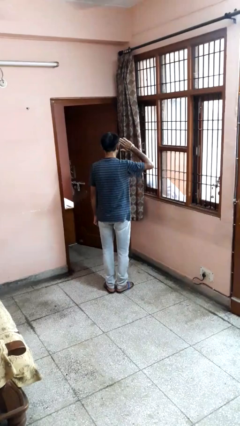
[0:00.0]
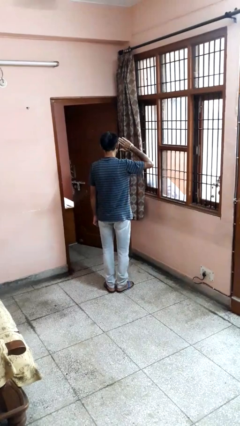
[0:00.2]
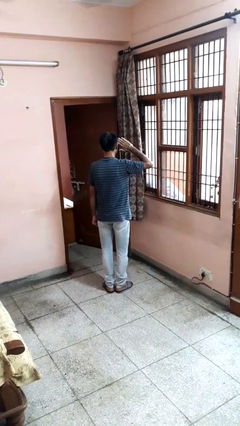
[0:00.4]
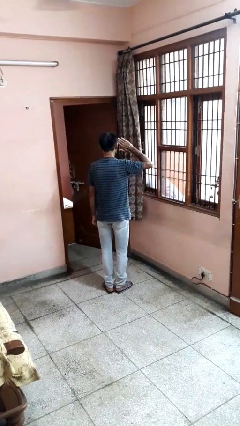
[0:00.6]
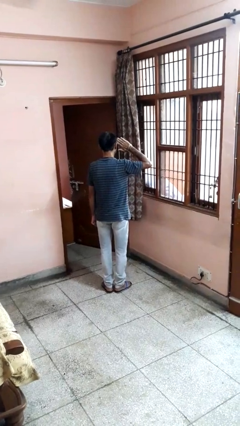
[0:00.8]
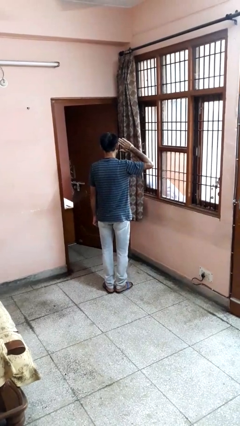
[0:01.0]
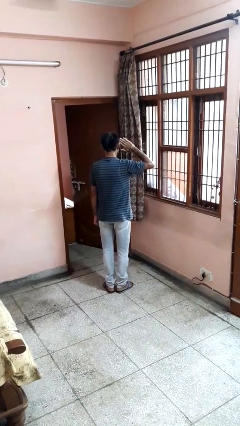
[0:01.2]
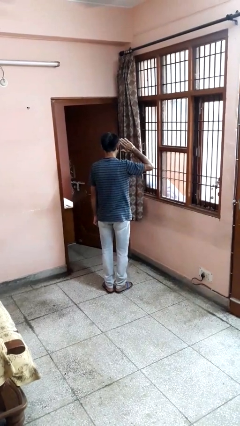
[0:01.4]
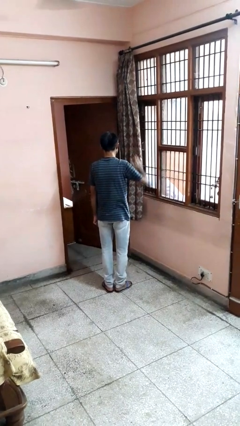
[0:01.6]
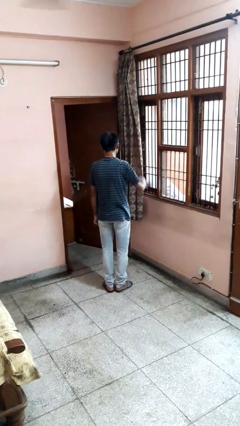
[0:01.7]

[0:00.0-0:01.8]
person salutes

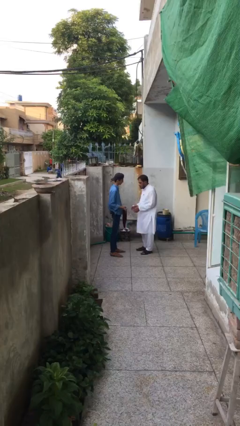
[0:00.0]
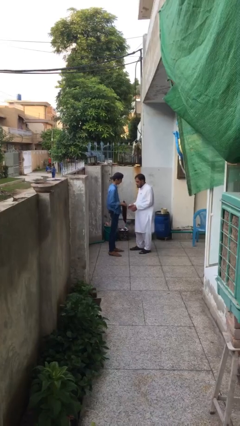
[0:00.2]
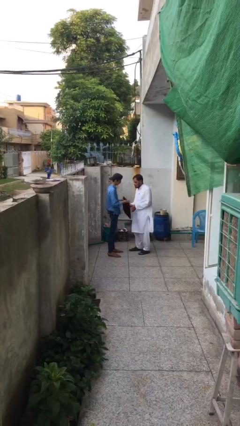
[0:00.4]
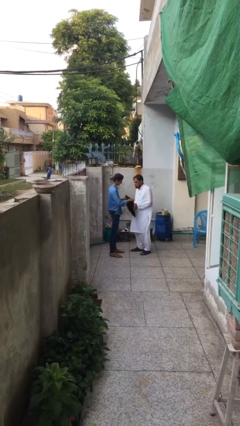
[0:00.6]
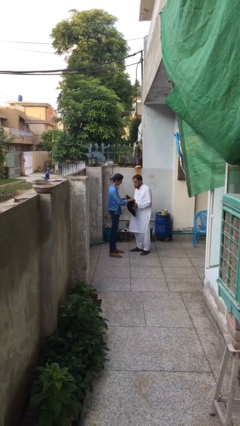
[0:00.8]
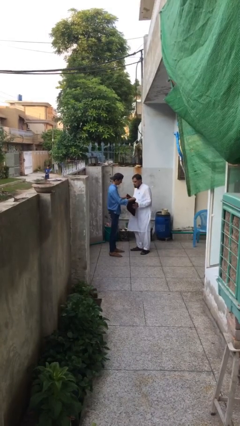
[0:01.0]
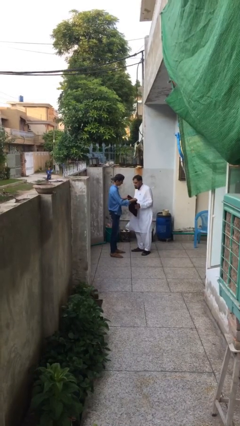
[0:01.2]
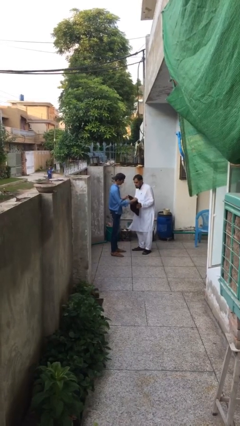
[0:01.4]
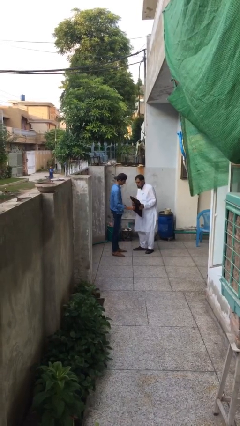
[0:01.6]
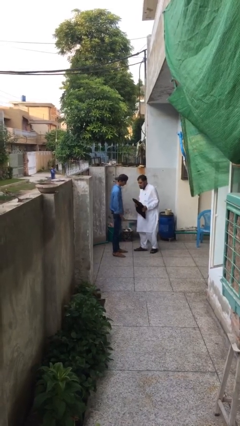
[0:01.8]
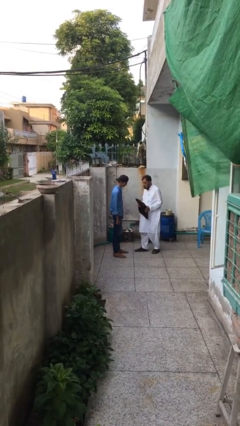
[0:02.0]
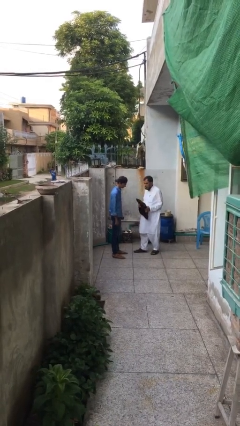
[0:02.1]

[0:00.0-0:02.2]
person transfers object to person

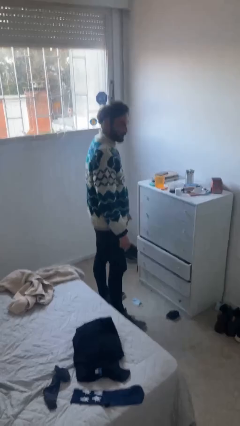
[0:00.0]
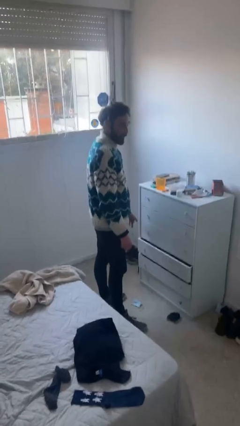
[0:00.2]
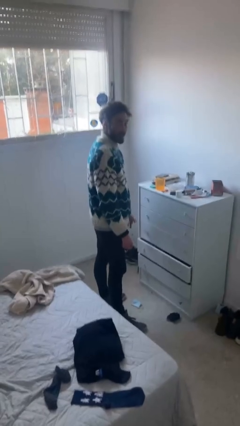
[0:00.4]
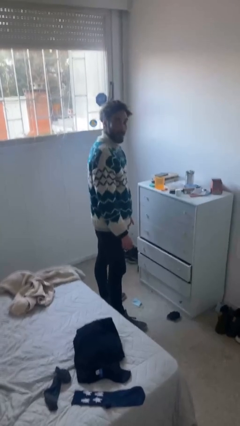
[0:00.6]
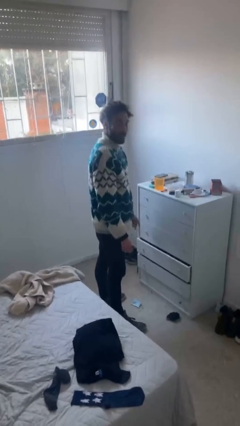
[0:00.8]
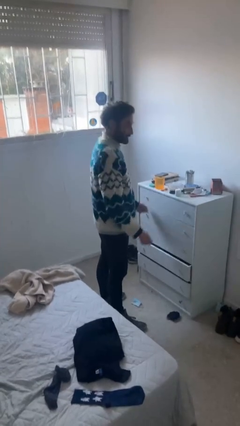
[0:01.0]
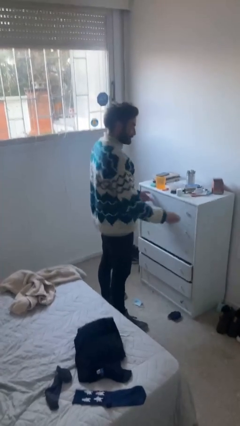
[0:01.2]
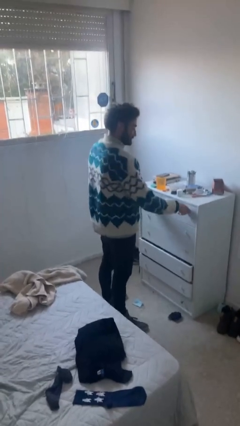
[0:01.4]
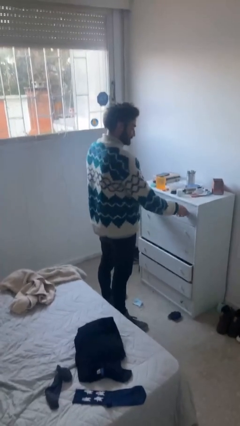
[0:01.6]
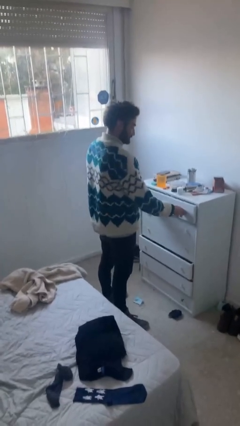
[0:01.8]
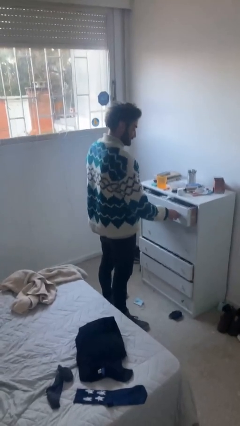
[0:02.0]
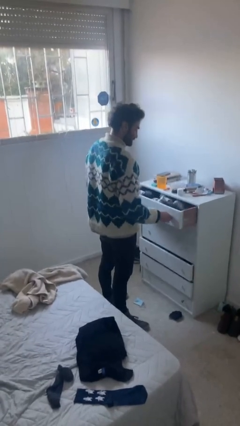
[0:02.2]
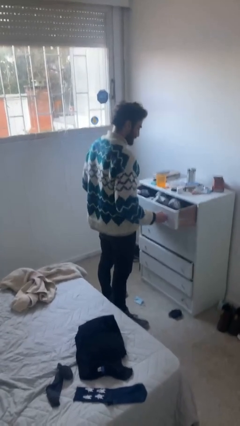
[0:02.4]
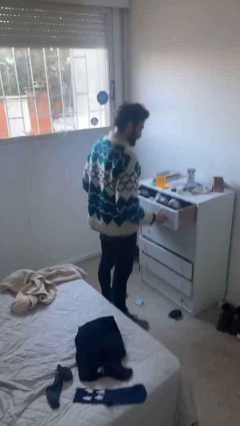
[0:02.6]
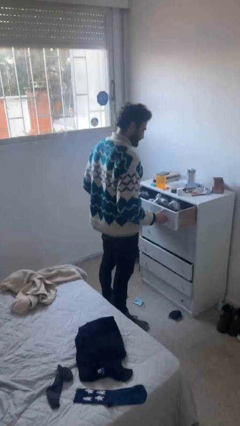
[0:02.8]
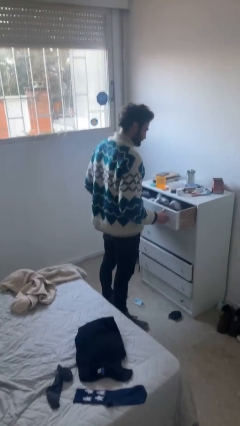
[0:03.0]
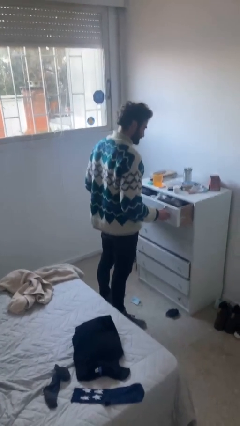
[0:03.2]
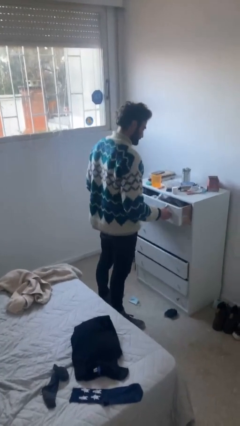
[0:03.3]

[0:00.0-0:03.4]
person opens dresser drawer

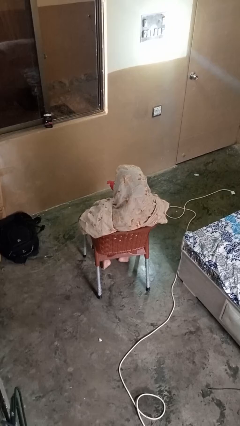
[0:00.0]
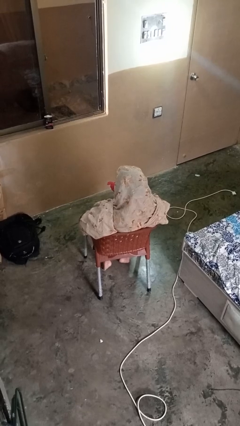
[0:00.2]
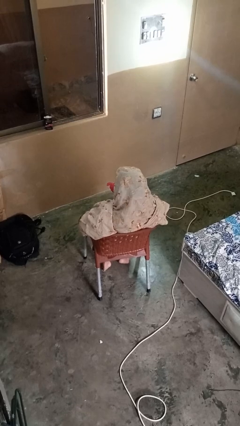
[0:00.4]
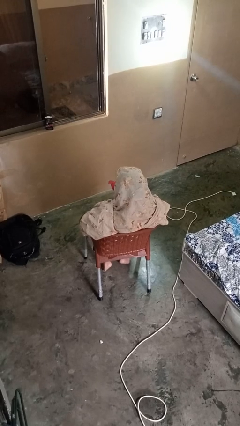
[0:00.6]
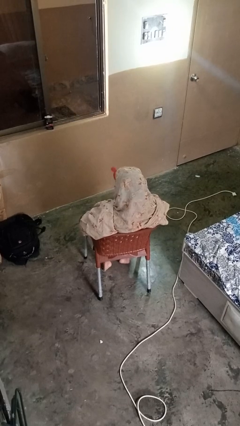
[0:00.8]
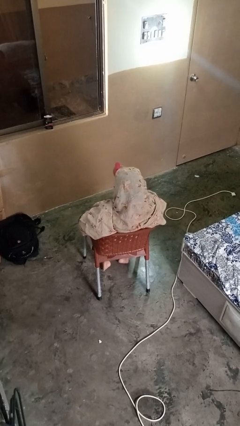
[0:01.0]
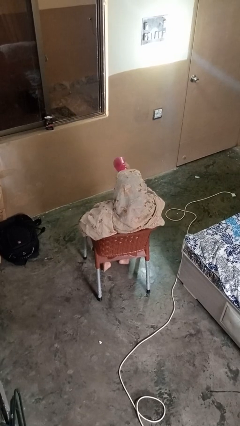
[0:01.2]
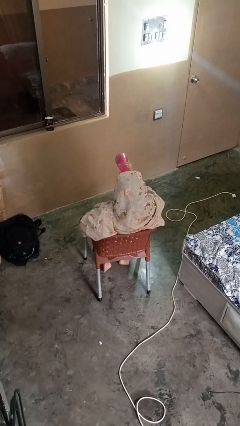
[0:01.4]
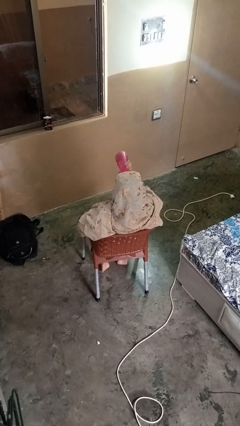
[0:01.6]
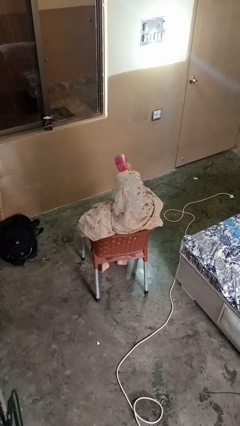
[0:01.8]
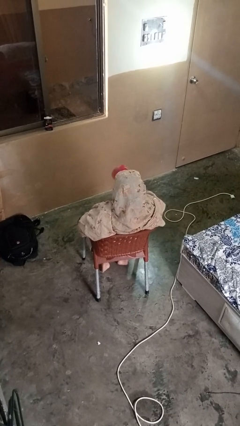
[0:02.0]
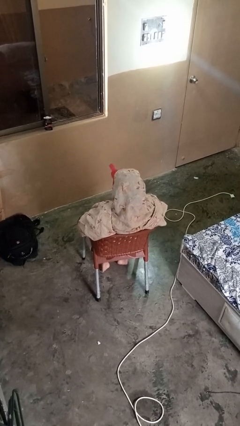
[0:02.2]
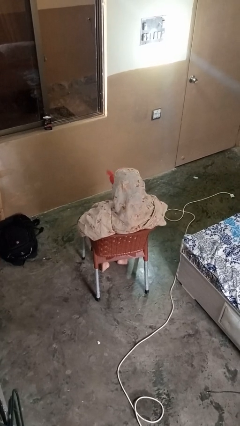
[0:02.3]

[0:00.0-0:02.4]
person drinks from bottle

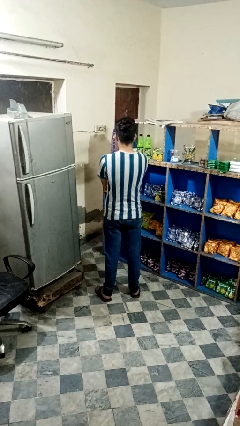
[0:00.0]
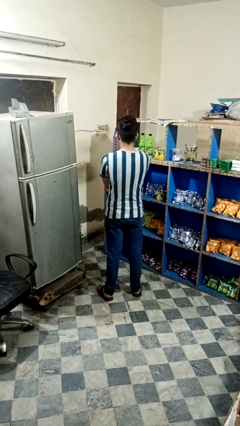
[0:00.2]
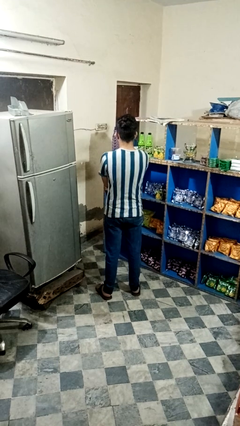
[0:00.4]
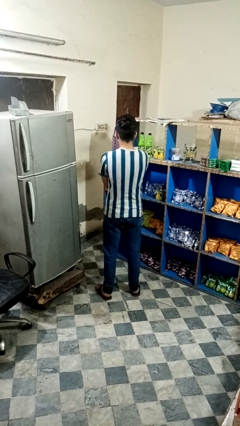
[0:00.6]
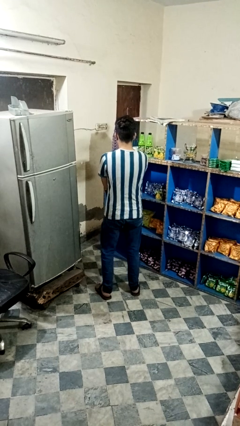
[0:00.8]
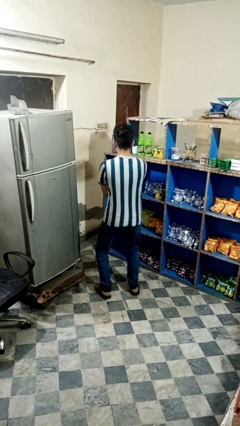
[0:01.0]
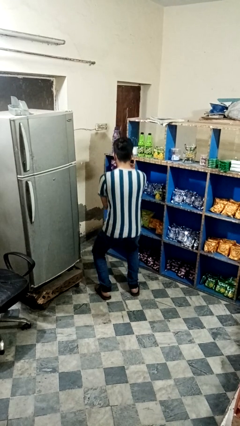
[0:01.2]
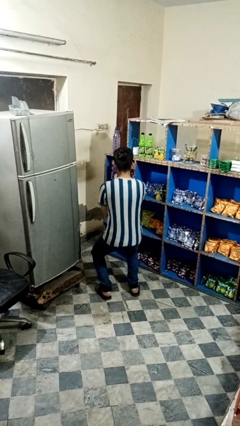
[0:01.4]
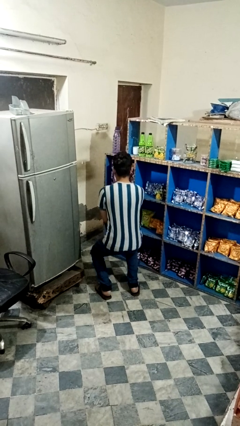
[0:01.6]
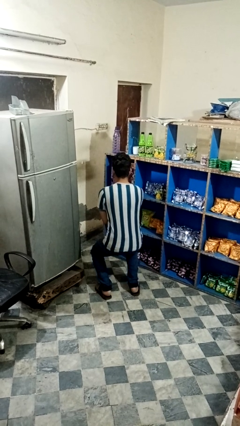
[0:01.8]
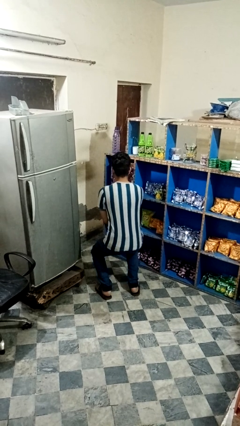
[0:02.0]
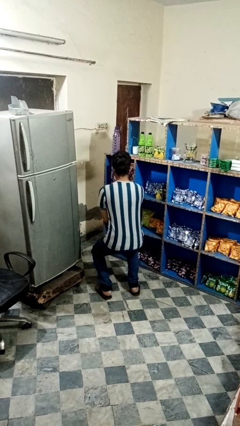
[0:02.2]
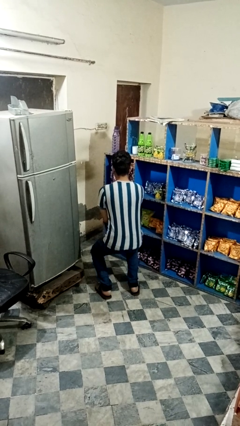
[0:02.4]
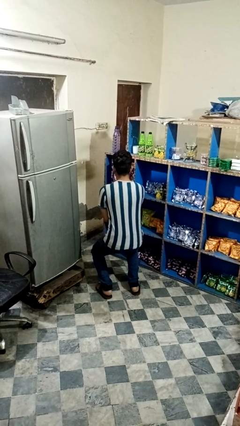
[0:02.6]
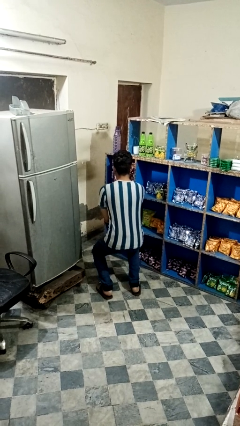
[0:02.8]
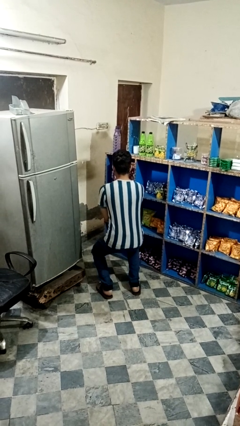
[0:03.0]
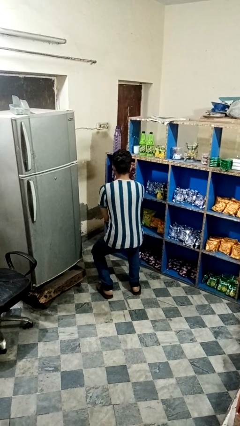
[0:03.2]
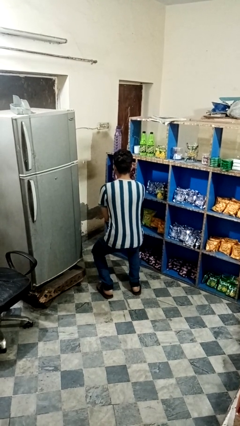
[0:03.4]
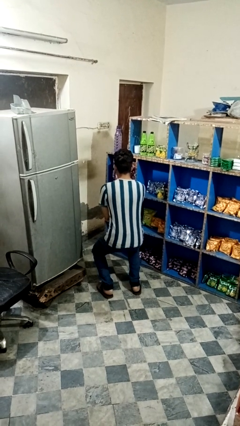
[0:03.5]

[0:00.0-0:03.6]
person squats

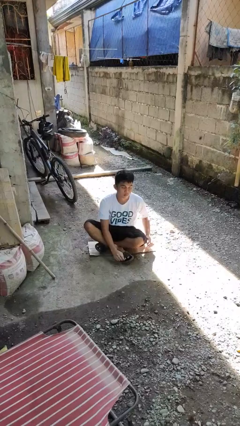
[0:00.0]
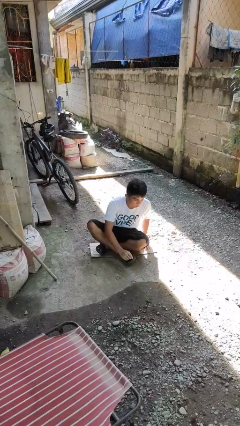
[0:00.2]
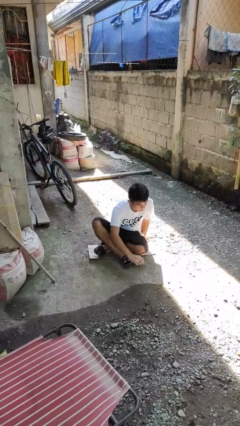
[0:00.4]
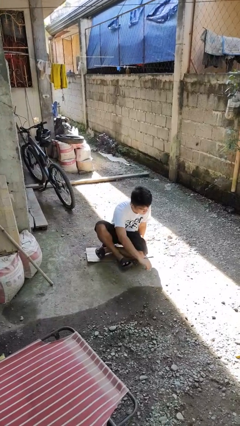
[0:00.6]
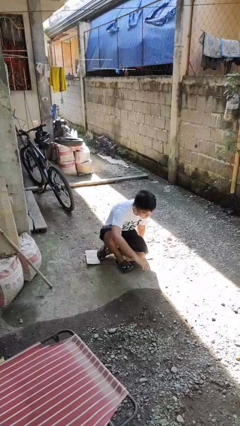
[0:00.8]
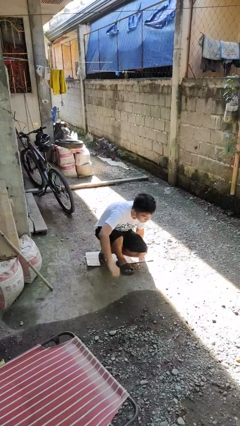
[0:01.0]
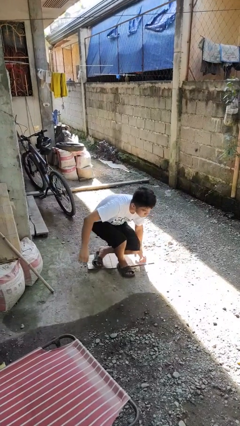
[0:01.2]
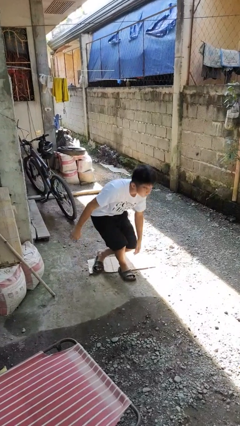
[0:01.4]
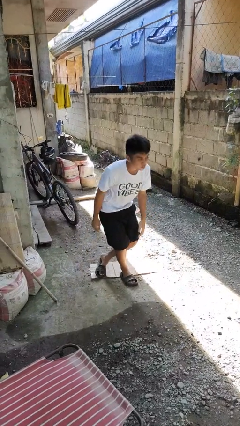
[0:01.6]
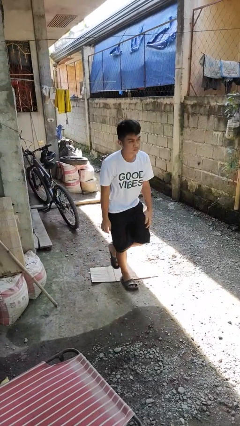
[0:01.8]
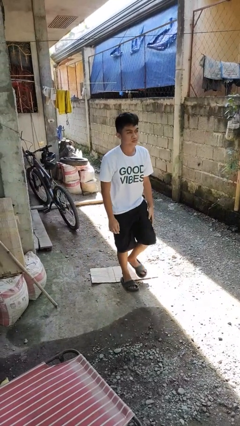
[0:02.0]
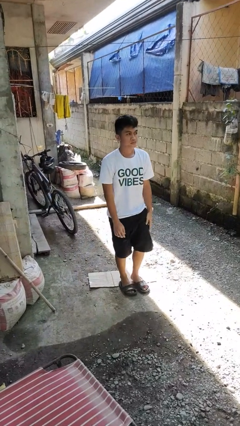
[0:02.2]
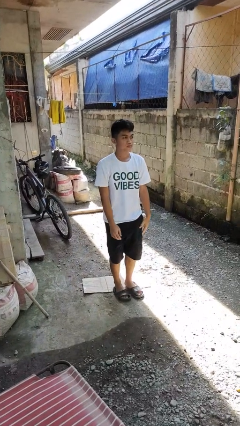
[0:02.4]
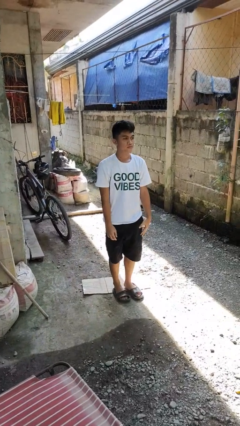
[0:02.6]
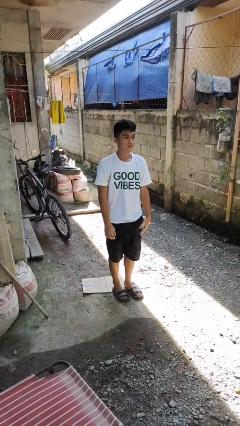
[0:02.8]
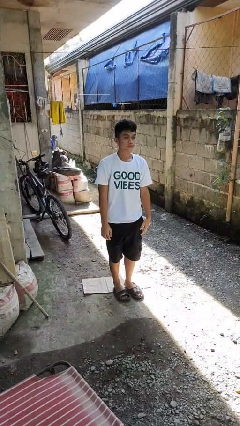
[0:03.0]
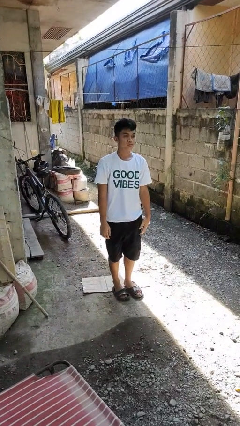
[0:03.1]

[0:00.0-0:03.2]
person stands up from floor

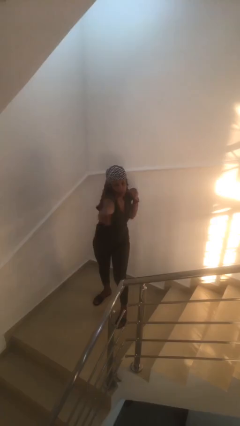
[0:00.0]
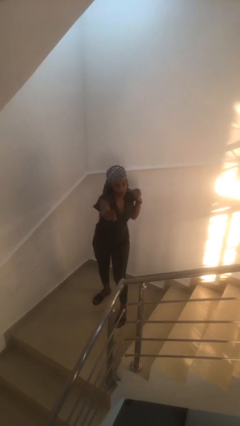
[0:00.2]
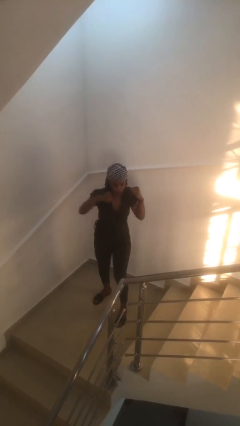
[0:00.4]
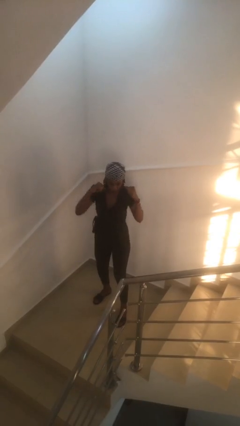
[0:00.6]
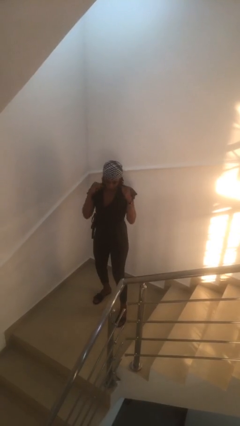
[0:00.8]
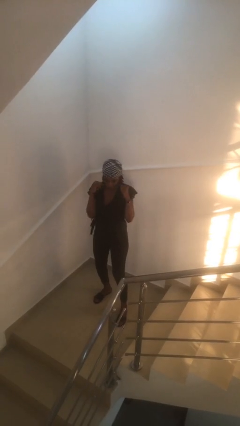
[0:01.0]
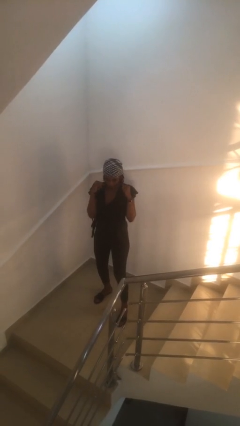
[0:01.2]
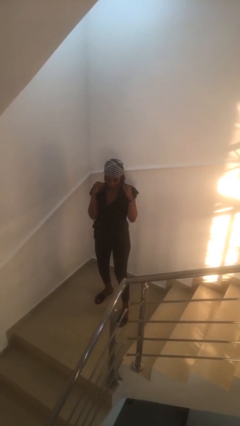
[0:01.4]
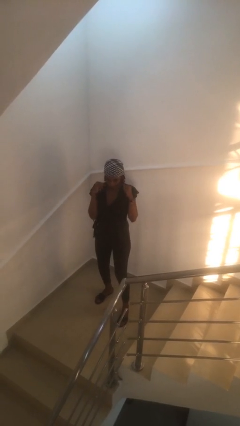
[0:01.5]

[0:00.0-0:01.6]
person punches
